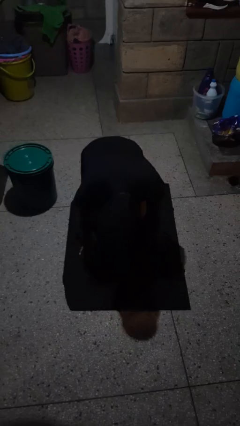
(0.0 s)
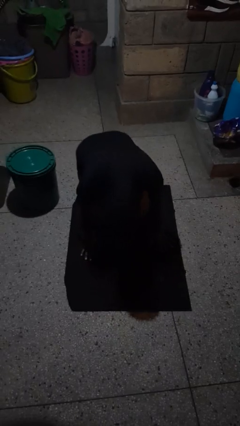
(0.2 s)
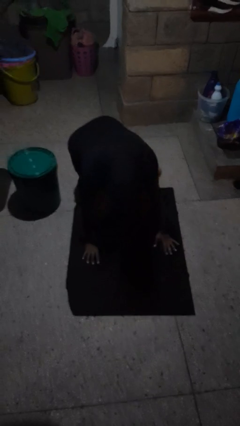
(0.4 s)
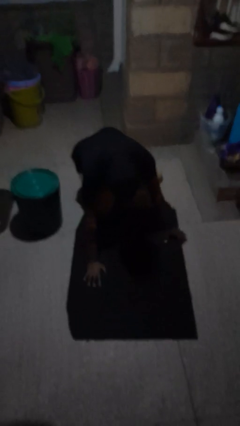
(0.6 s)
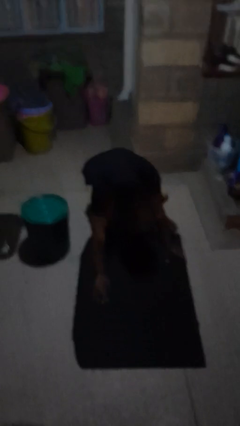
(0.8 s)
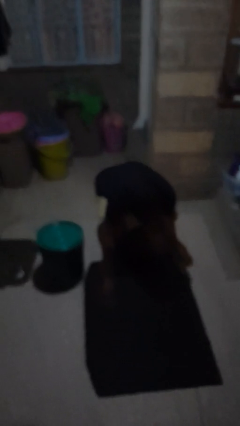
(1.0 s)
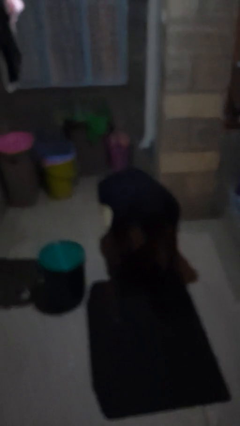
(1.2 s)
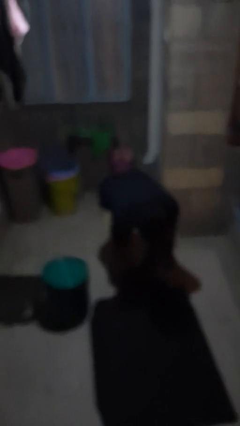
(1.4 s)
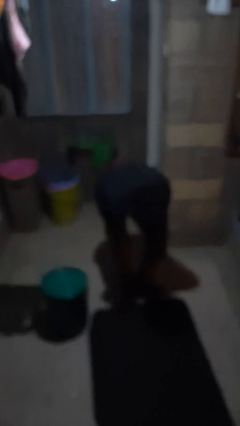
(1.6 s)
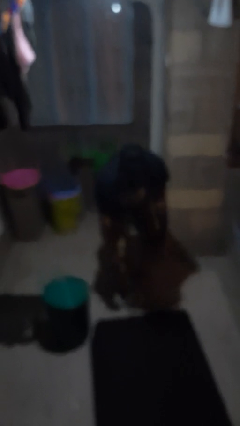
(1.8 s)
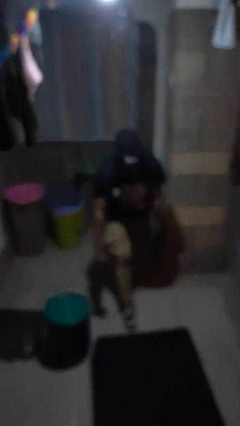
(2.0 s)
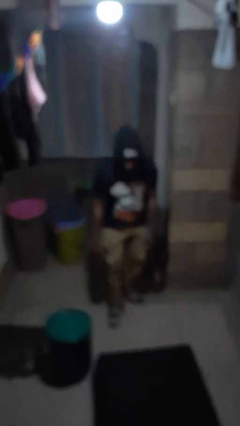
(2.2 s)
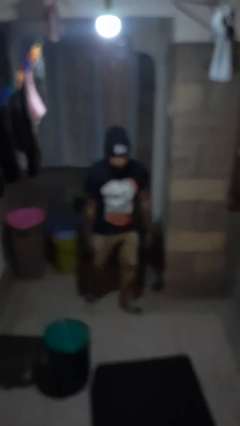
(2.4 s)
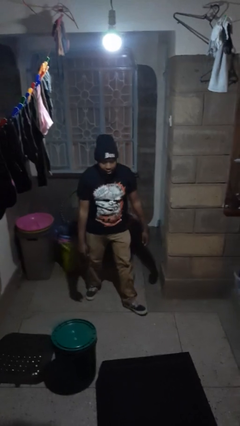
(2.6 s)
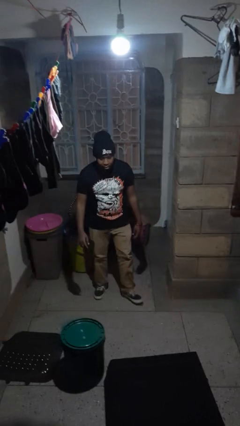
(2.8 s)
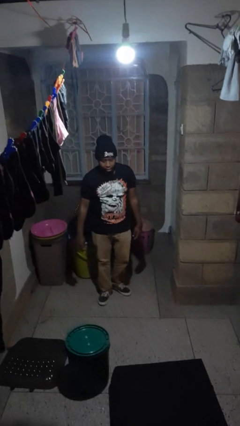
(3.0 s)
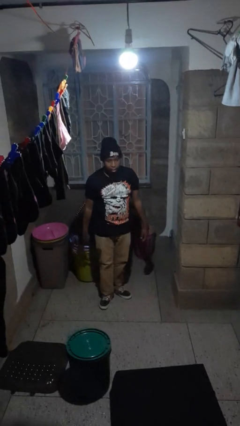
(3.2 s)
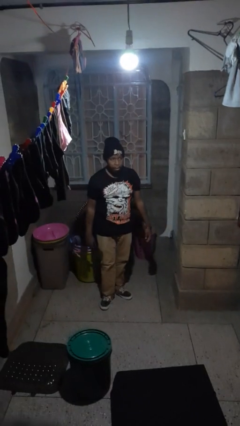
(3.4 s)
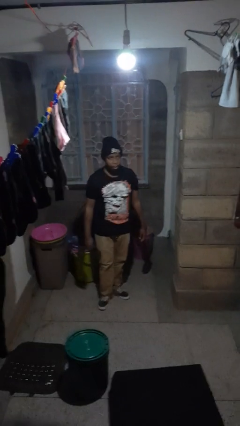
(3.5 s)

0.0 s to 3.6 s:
person stands up from floor

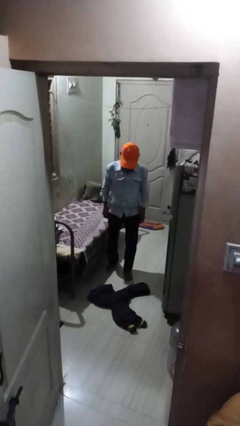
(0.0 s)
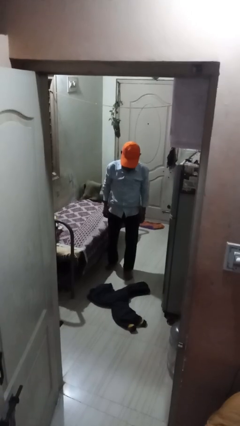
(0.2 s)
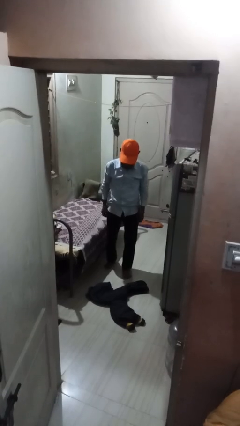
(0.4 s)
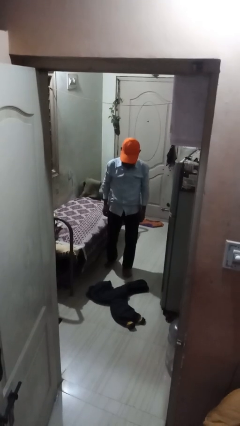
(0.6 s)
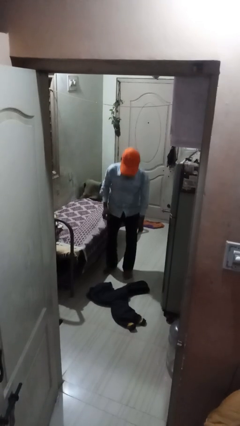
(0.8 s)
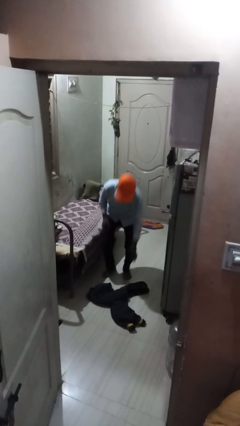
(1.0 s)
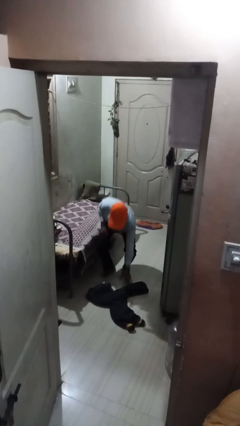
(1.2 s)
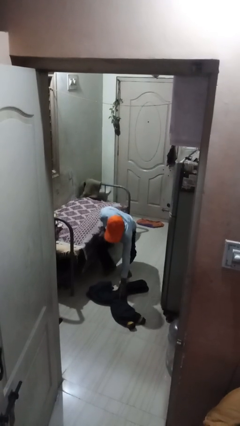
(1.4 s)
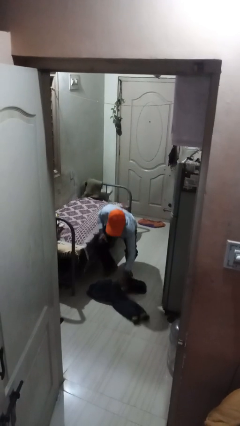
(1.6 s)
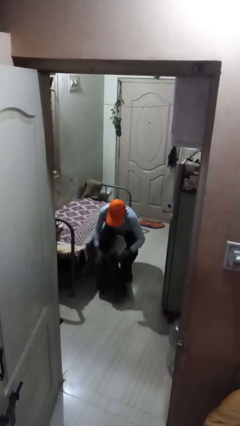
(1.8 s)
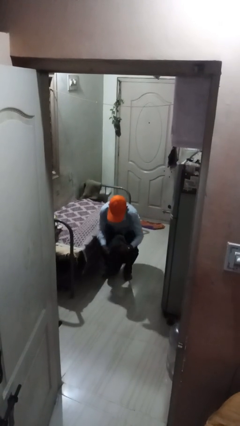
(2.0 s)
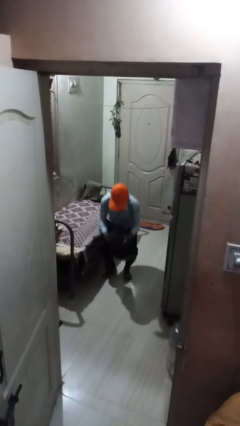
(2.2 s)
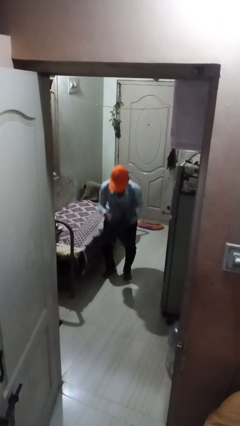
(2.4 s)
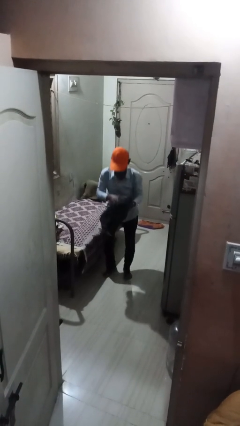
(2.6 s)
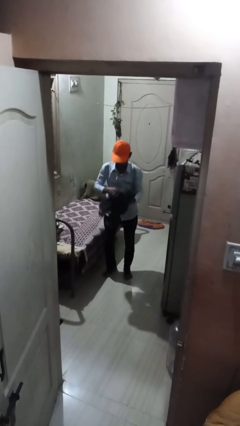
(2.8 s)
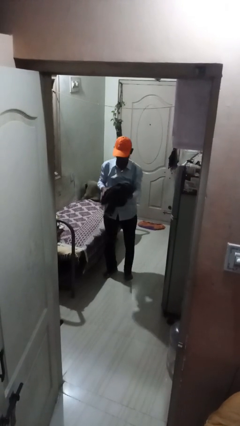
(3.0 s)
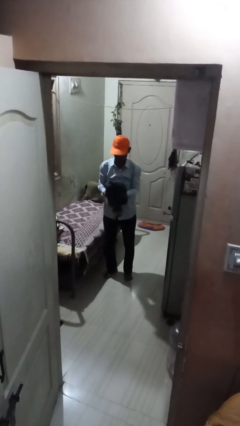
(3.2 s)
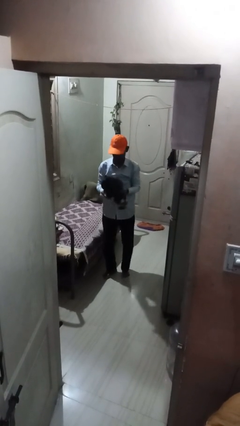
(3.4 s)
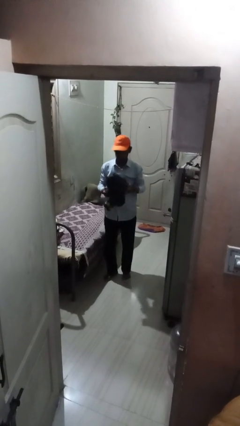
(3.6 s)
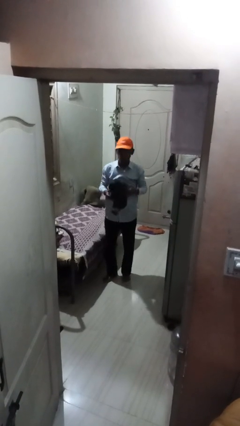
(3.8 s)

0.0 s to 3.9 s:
person picks up object from floor

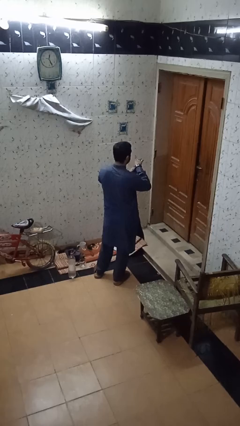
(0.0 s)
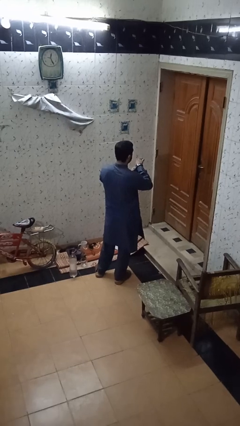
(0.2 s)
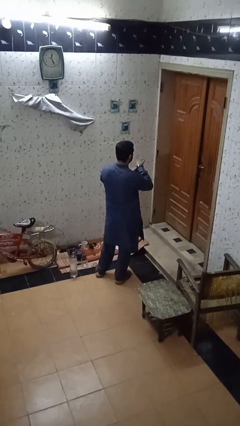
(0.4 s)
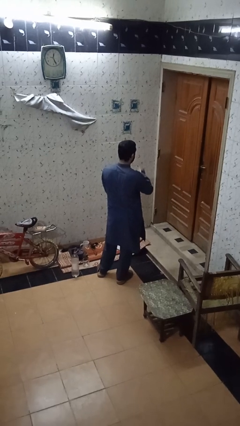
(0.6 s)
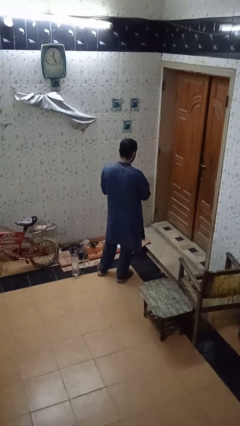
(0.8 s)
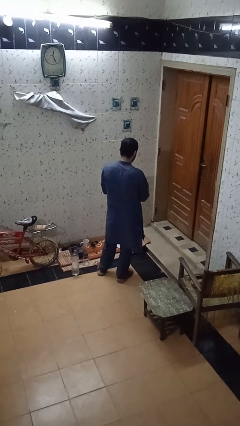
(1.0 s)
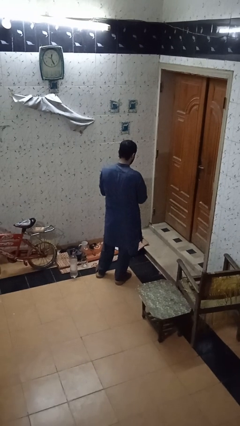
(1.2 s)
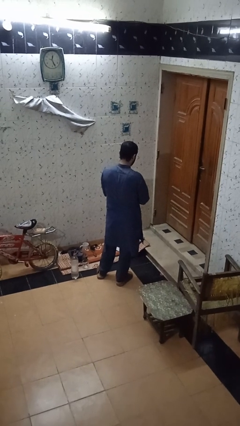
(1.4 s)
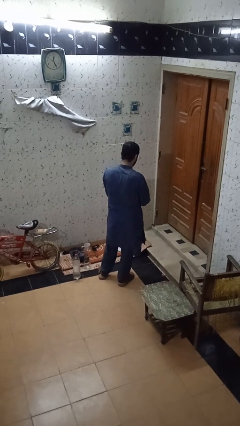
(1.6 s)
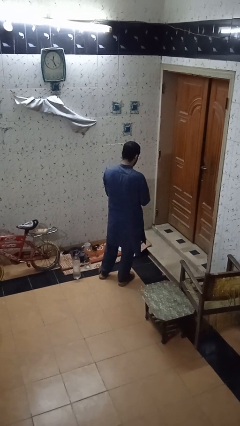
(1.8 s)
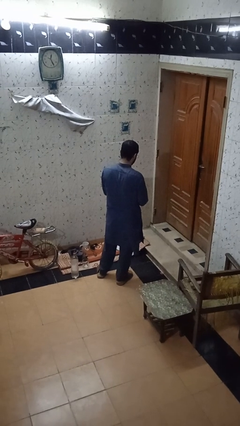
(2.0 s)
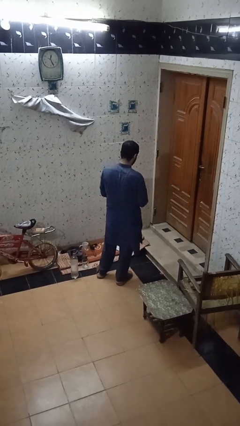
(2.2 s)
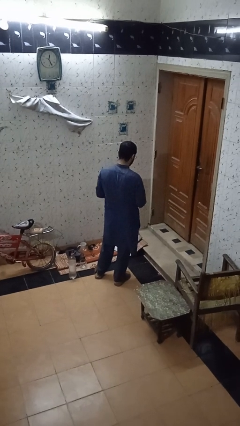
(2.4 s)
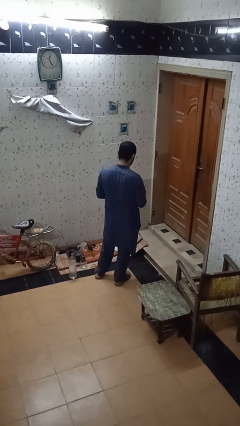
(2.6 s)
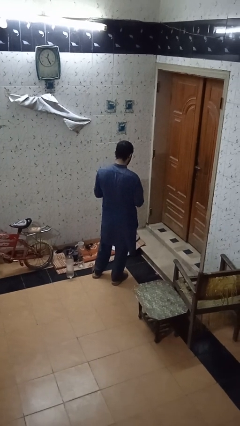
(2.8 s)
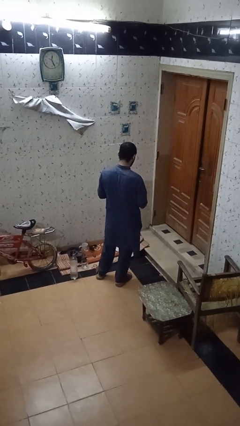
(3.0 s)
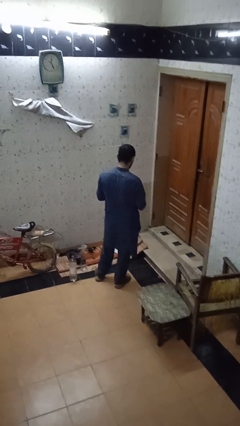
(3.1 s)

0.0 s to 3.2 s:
person takes off wristwatch

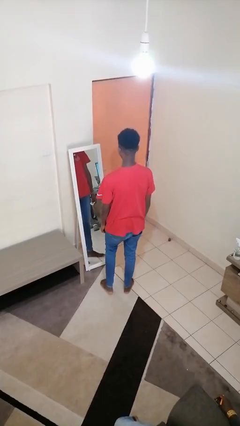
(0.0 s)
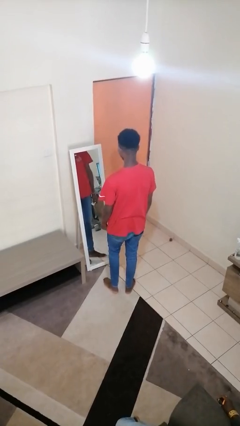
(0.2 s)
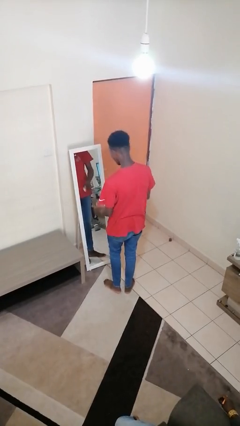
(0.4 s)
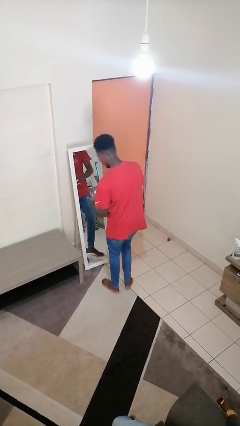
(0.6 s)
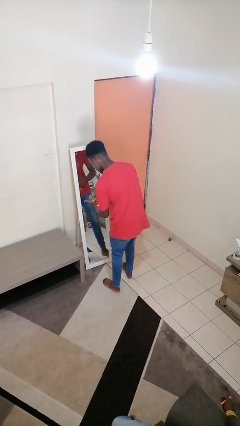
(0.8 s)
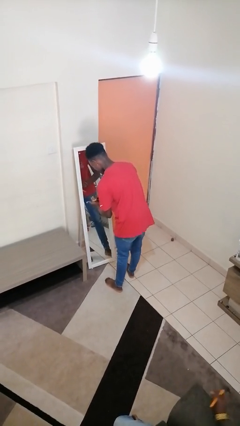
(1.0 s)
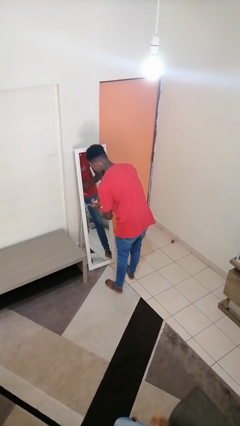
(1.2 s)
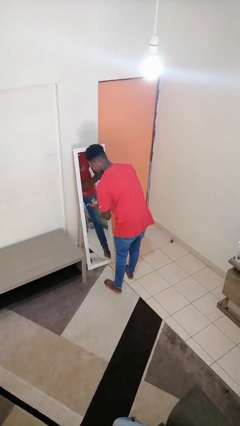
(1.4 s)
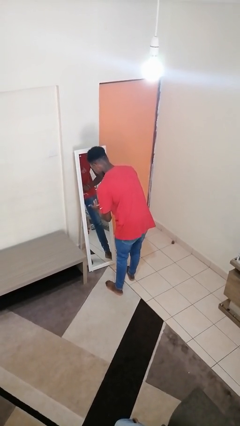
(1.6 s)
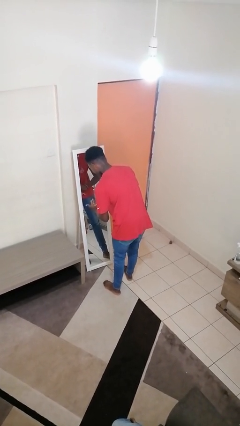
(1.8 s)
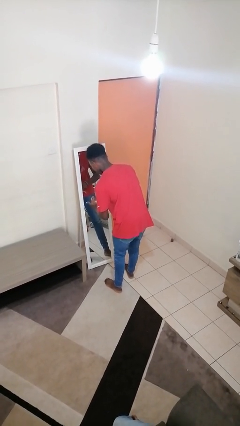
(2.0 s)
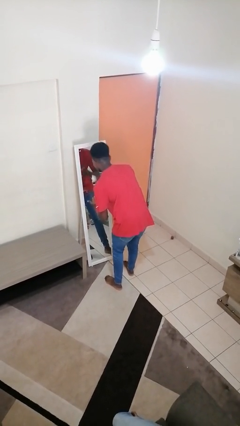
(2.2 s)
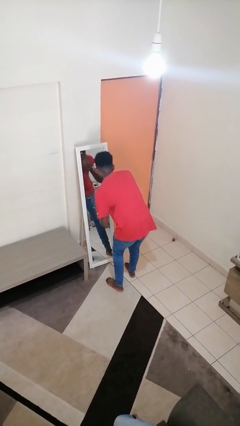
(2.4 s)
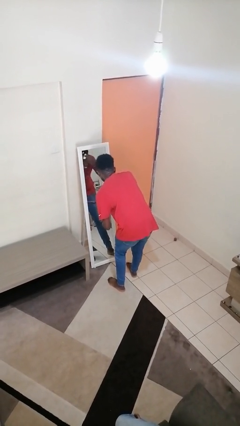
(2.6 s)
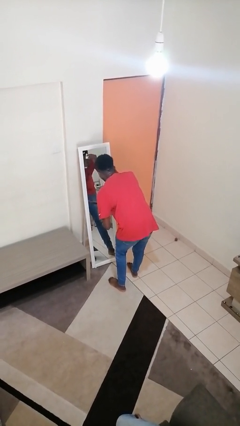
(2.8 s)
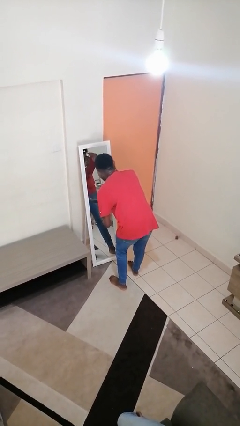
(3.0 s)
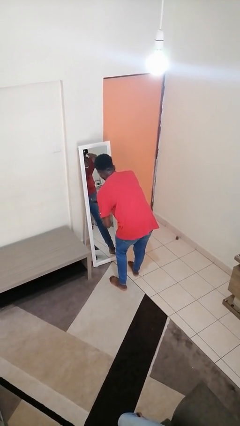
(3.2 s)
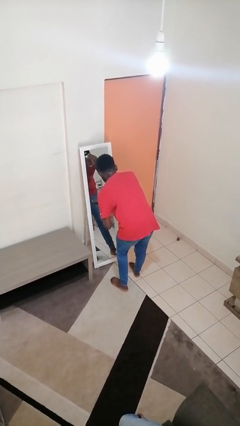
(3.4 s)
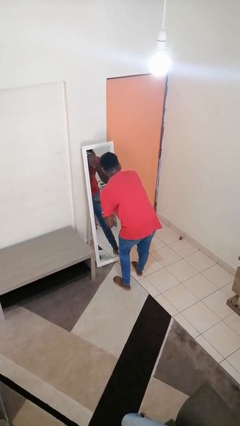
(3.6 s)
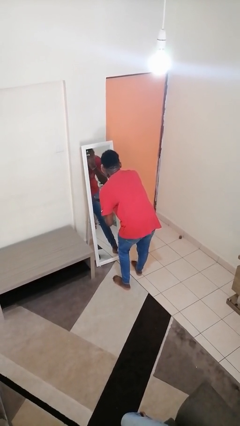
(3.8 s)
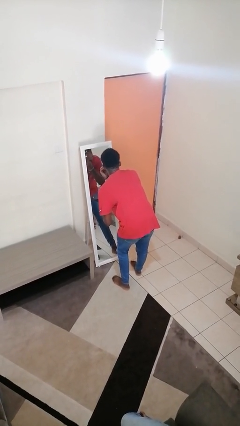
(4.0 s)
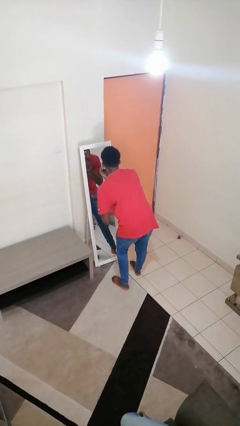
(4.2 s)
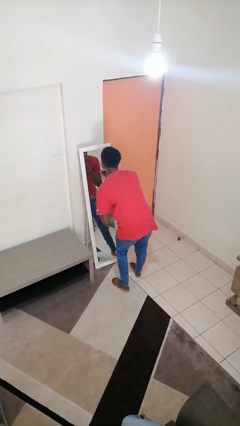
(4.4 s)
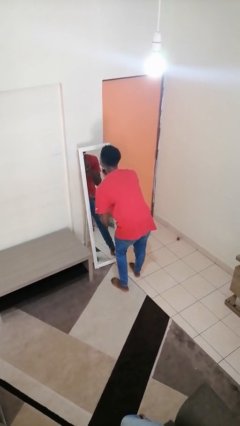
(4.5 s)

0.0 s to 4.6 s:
person applies foundation makeup

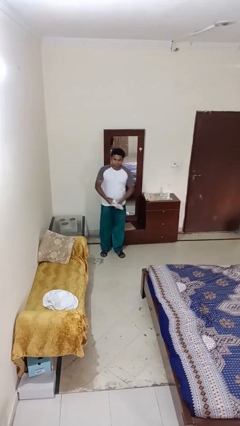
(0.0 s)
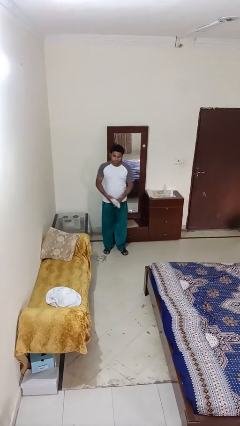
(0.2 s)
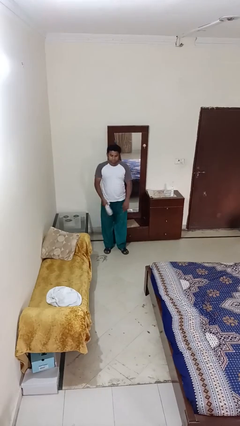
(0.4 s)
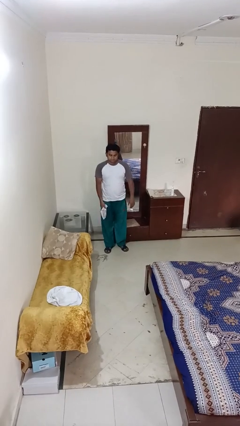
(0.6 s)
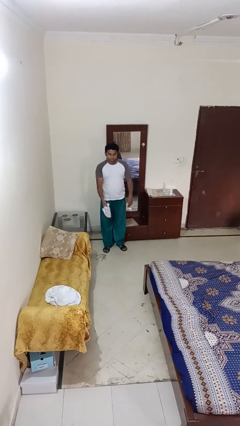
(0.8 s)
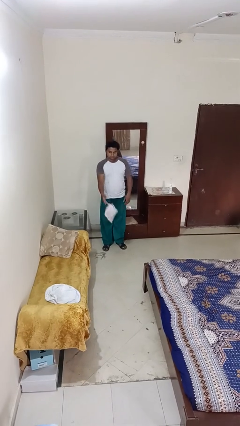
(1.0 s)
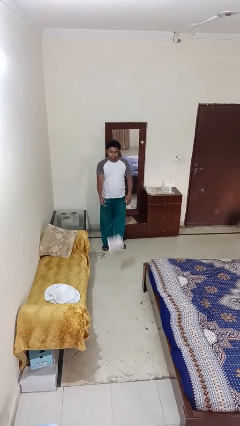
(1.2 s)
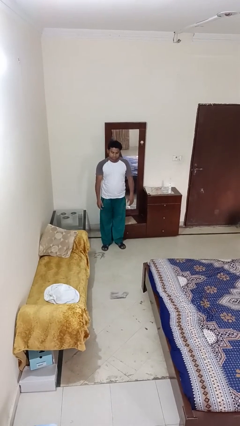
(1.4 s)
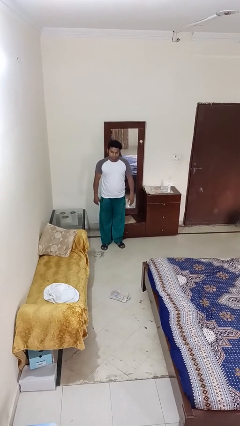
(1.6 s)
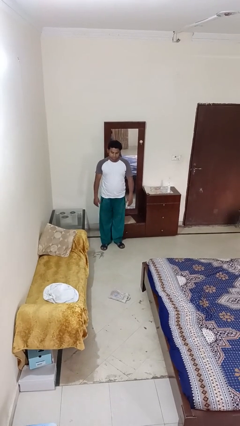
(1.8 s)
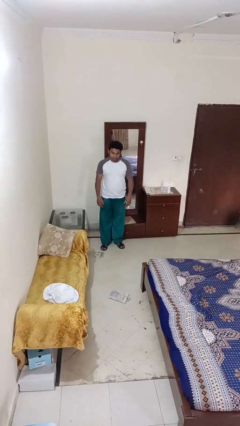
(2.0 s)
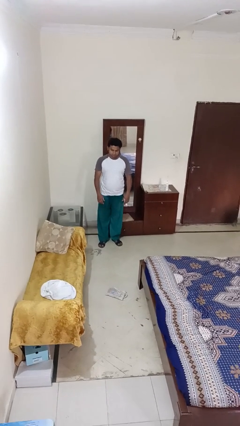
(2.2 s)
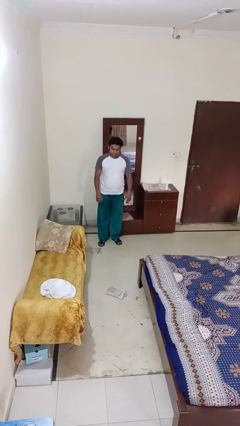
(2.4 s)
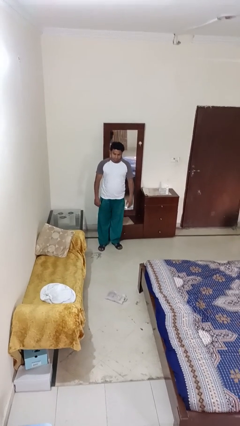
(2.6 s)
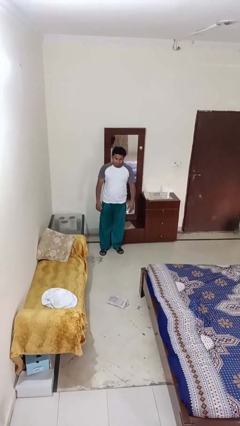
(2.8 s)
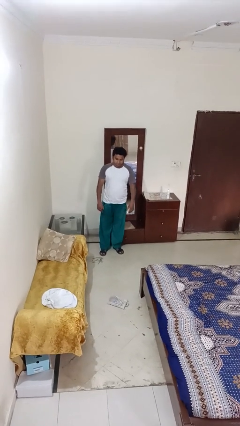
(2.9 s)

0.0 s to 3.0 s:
person throws object to ground
